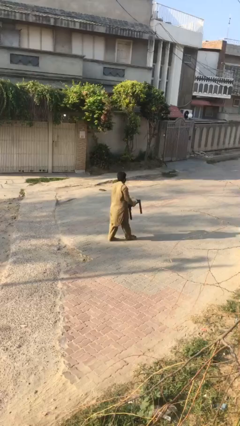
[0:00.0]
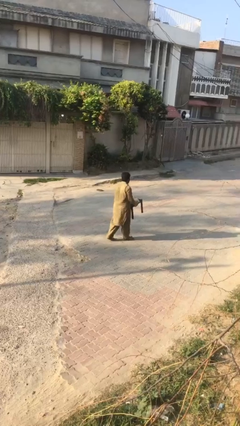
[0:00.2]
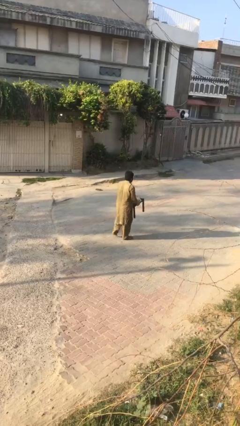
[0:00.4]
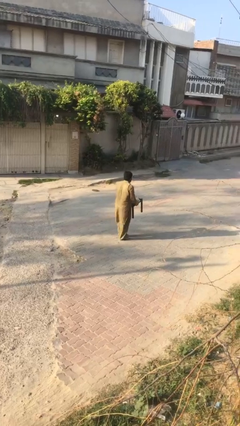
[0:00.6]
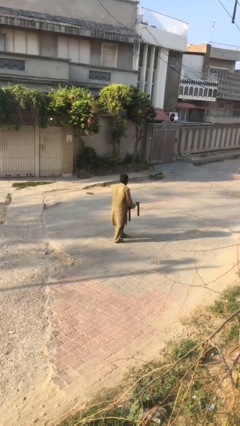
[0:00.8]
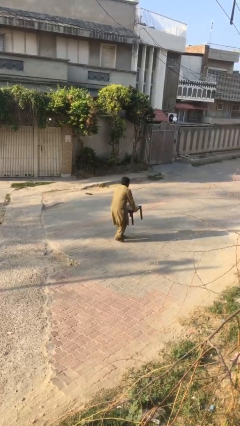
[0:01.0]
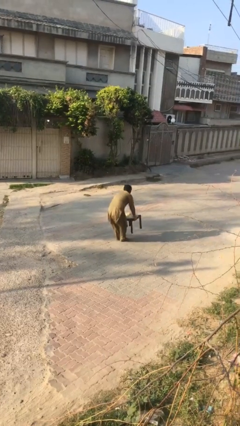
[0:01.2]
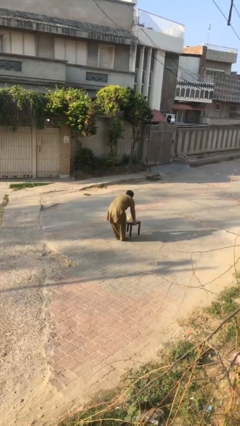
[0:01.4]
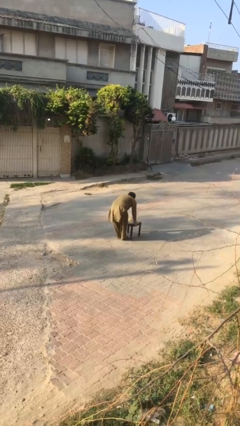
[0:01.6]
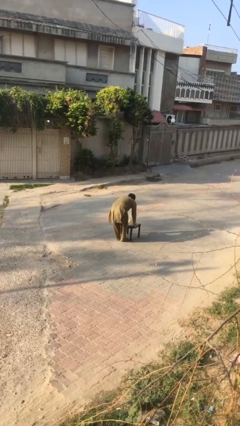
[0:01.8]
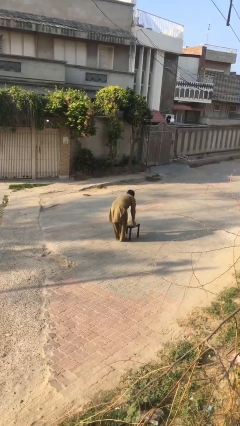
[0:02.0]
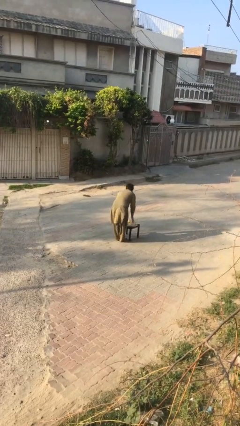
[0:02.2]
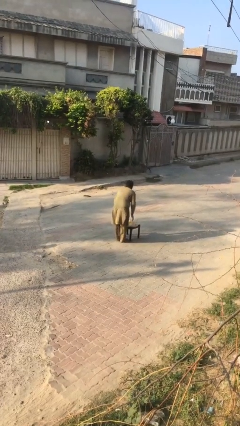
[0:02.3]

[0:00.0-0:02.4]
person puts down object on floor

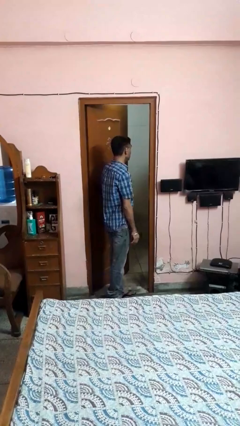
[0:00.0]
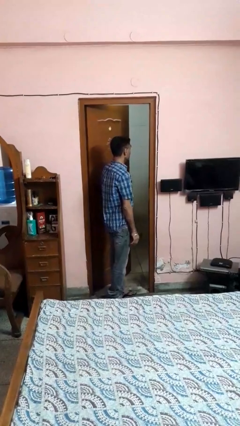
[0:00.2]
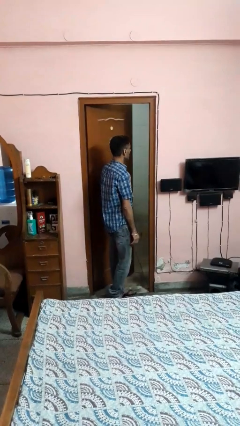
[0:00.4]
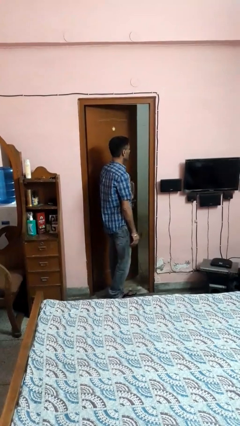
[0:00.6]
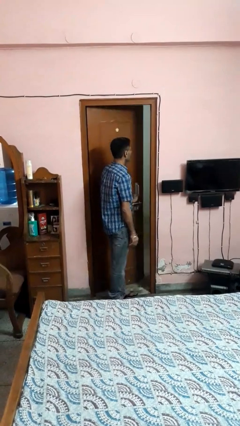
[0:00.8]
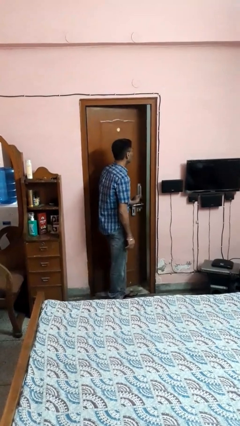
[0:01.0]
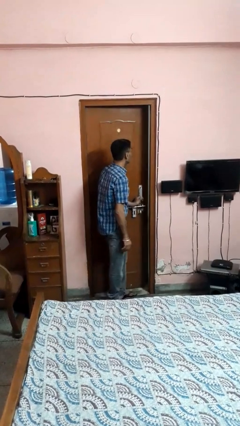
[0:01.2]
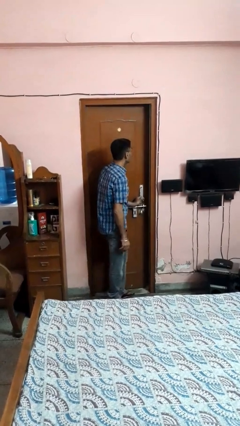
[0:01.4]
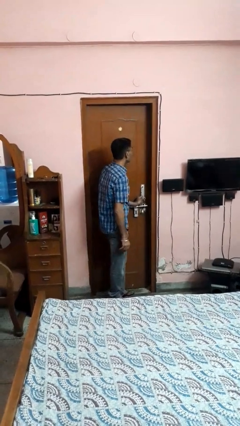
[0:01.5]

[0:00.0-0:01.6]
person closes facility door

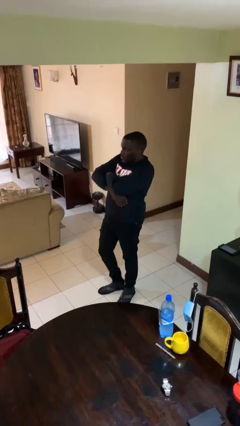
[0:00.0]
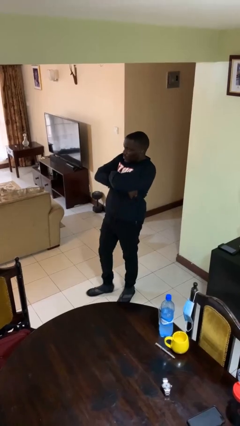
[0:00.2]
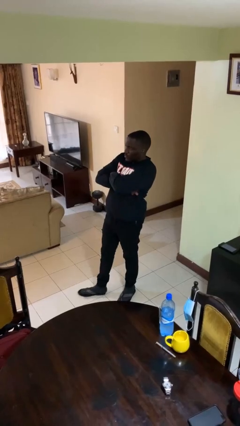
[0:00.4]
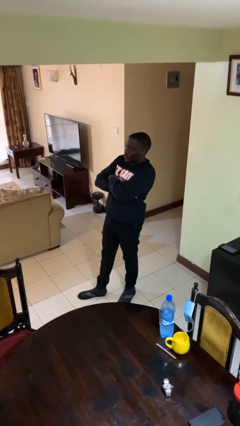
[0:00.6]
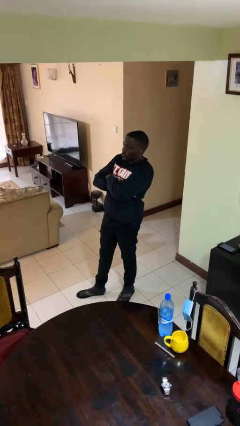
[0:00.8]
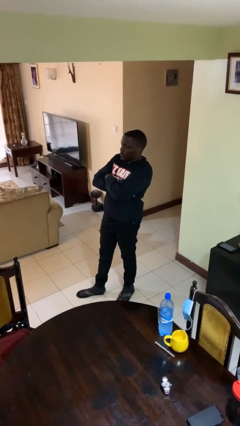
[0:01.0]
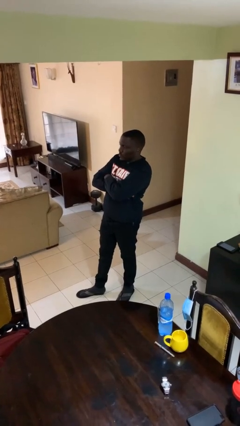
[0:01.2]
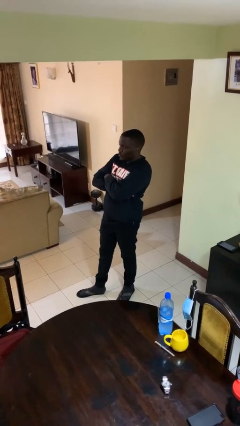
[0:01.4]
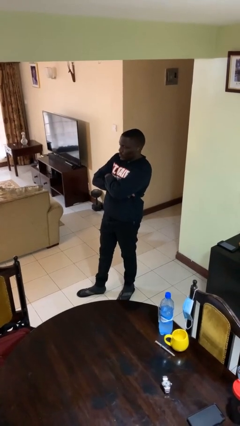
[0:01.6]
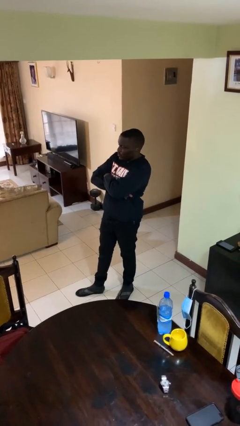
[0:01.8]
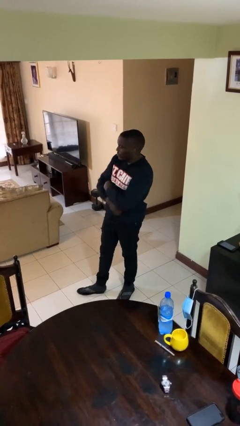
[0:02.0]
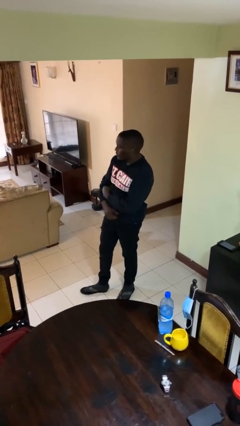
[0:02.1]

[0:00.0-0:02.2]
person crosses arms

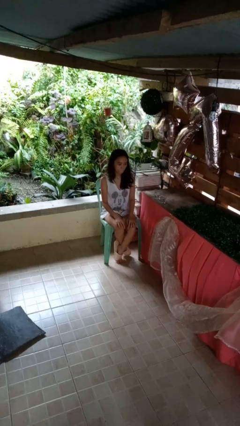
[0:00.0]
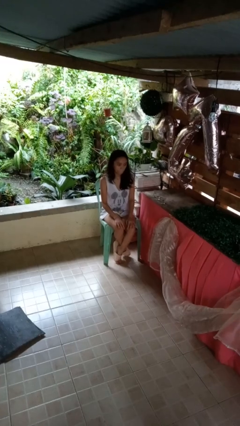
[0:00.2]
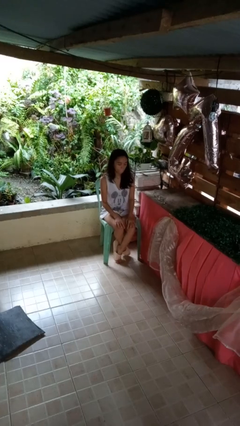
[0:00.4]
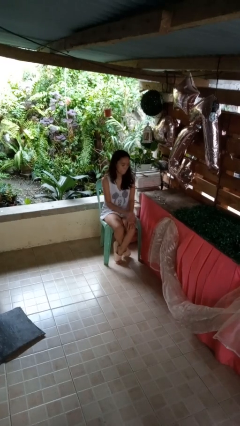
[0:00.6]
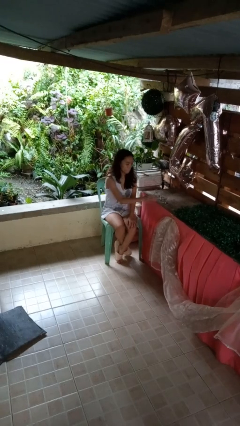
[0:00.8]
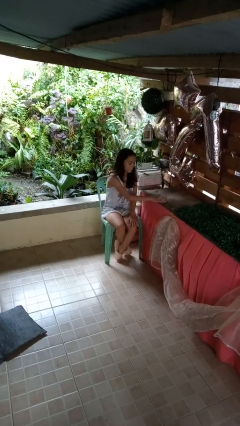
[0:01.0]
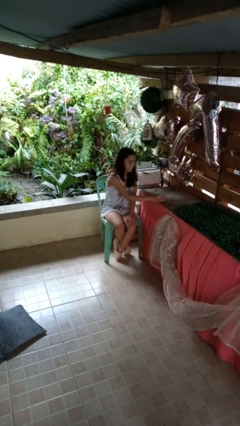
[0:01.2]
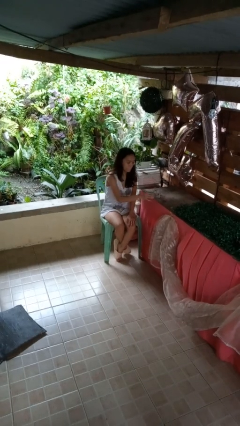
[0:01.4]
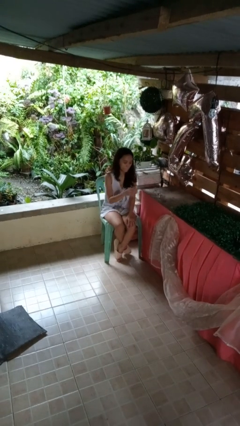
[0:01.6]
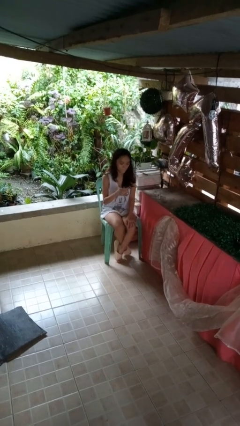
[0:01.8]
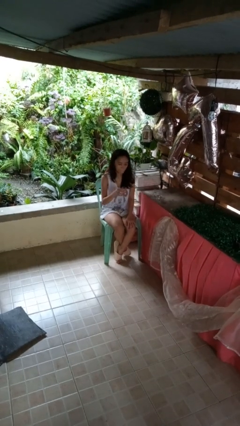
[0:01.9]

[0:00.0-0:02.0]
person picks up object from table

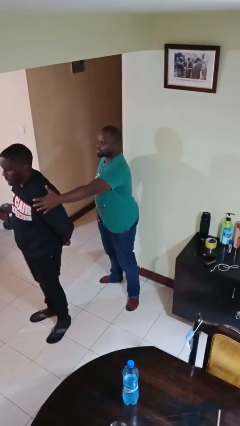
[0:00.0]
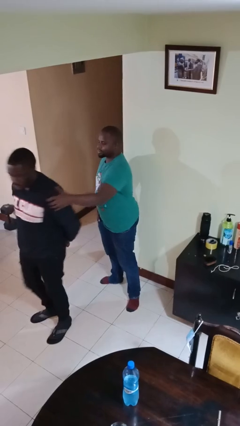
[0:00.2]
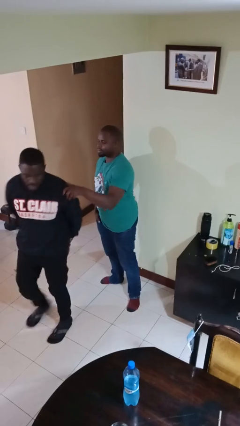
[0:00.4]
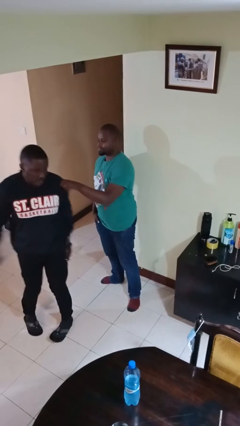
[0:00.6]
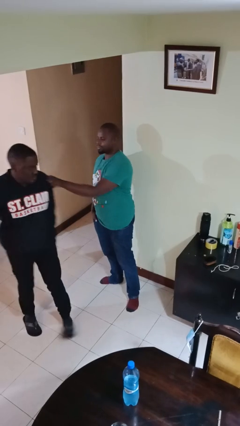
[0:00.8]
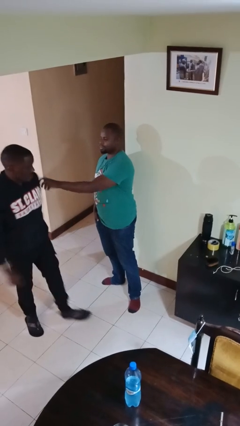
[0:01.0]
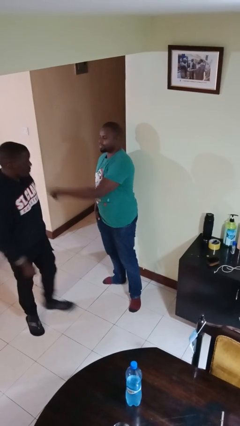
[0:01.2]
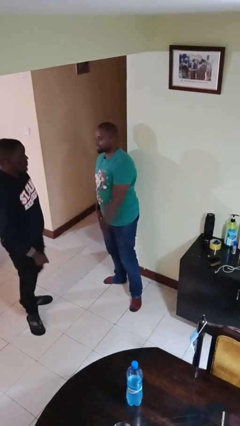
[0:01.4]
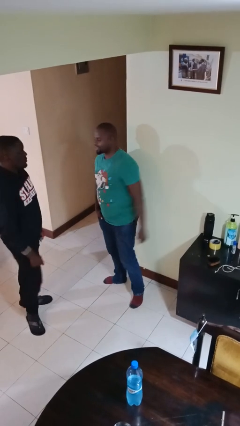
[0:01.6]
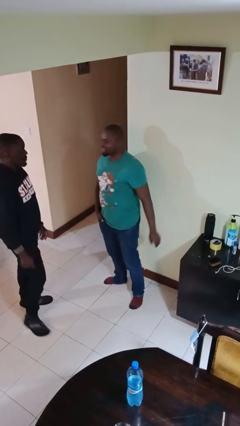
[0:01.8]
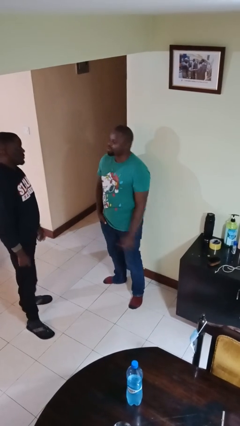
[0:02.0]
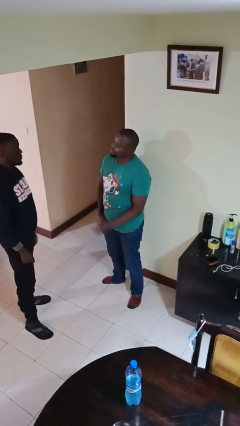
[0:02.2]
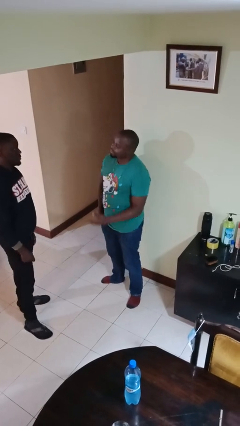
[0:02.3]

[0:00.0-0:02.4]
person spins person around

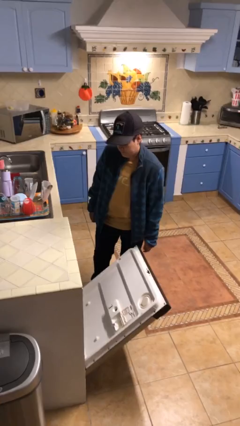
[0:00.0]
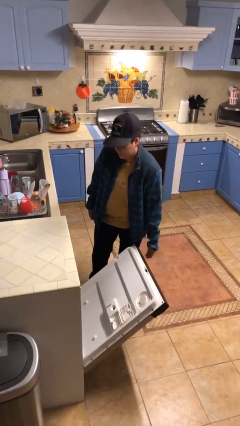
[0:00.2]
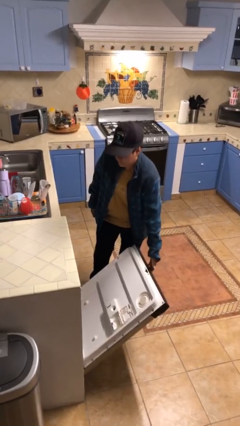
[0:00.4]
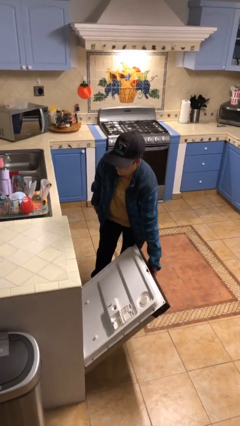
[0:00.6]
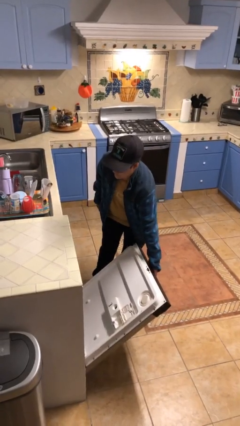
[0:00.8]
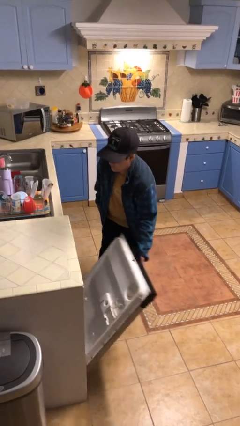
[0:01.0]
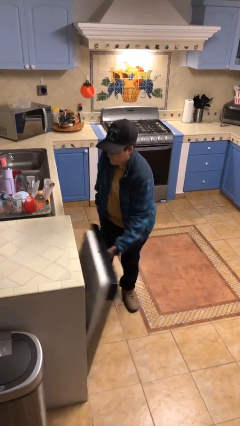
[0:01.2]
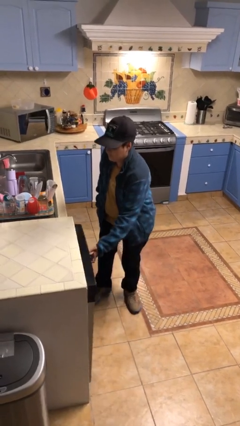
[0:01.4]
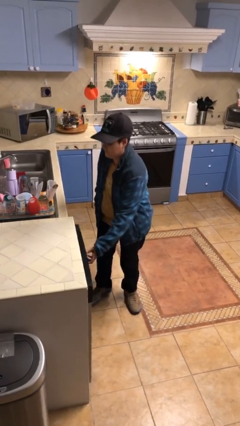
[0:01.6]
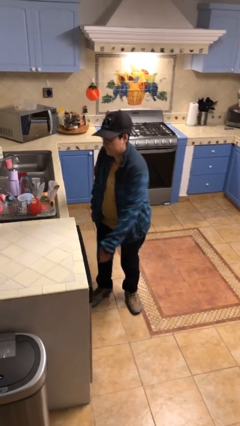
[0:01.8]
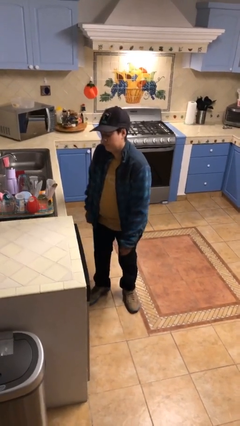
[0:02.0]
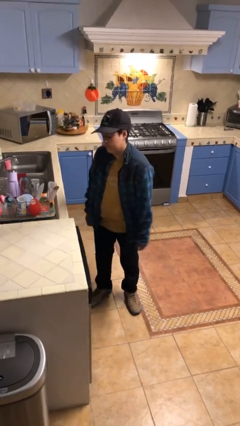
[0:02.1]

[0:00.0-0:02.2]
person closes dishwasher

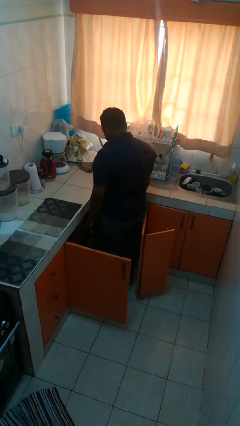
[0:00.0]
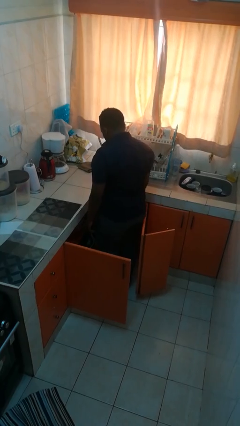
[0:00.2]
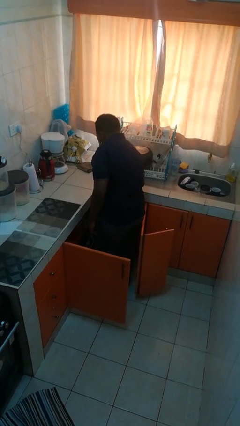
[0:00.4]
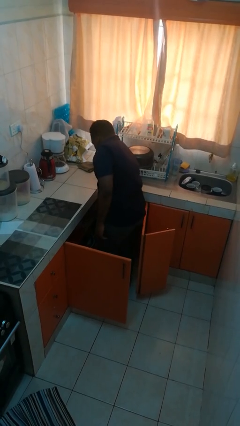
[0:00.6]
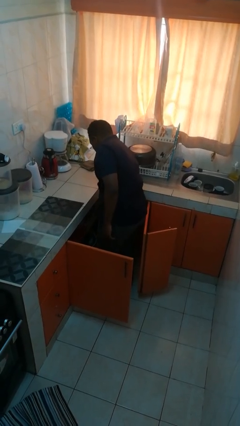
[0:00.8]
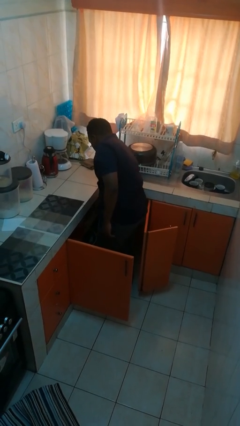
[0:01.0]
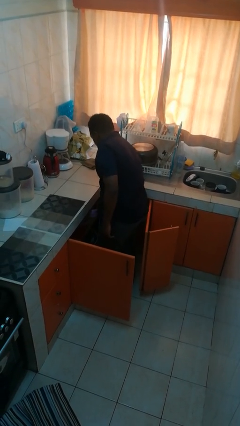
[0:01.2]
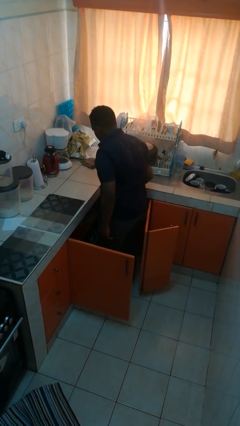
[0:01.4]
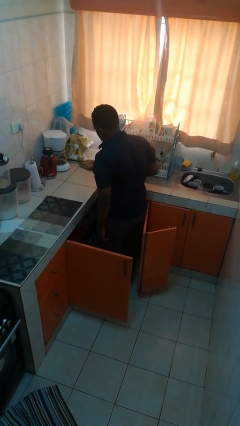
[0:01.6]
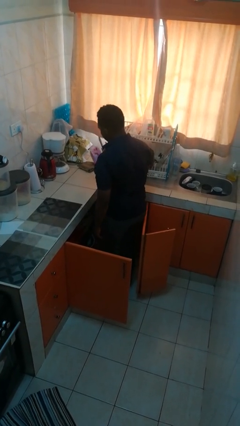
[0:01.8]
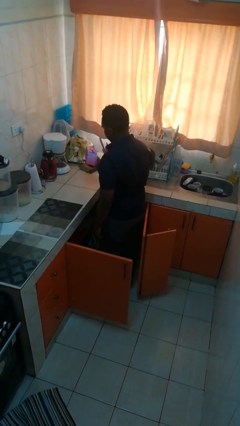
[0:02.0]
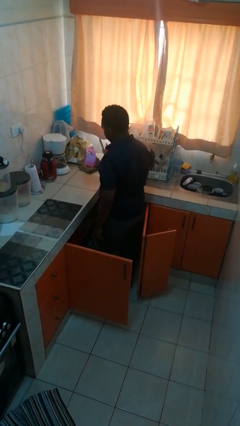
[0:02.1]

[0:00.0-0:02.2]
person takes object from cabinet

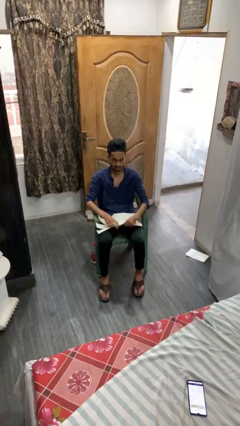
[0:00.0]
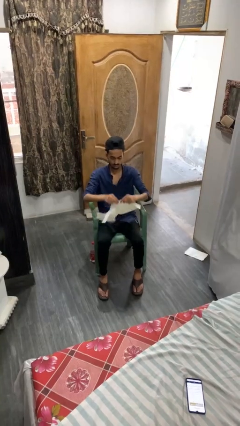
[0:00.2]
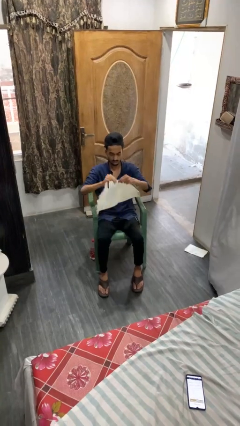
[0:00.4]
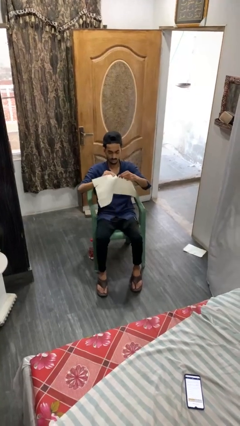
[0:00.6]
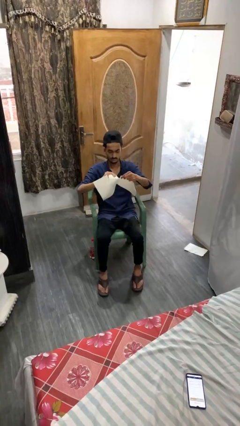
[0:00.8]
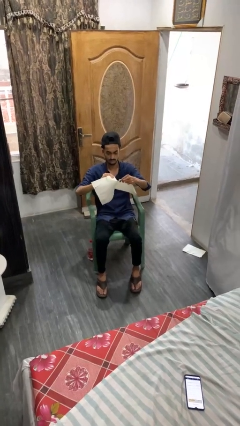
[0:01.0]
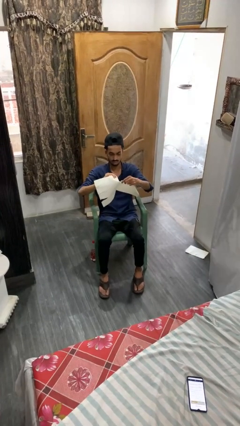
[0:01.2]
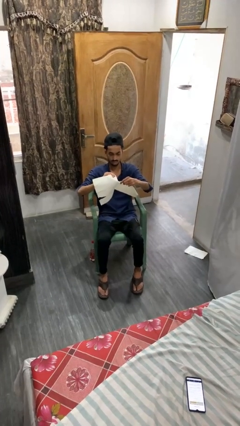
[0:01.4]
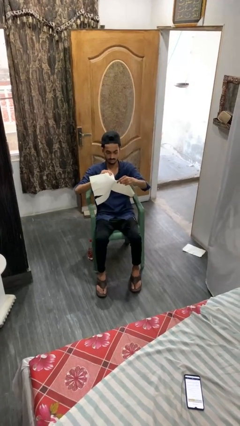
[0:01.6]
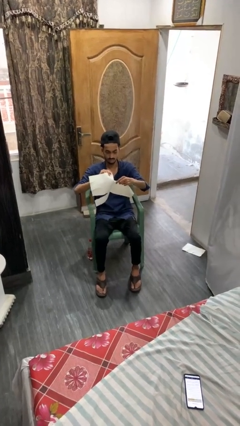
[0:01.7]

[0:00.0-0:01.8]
person tears paper
